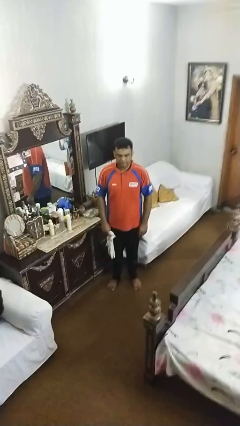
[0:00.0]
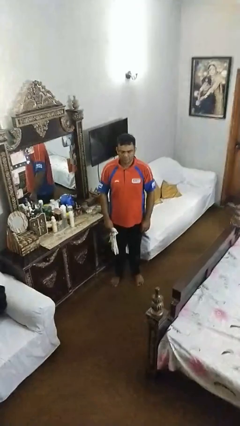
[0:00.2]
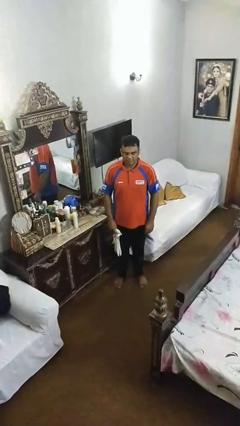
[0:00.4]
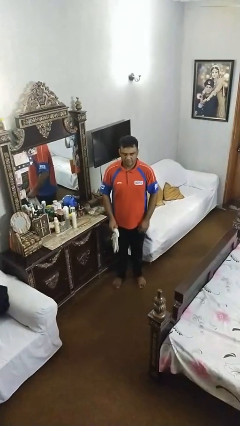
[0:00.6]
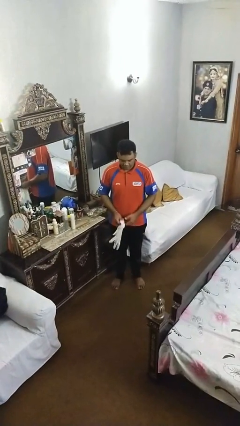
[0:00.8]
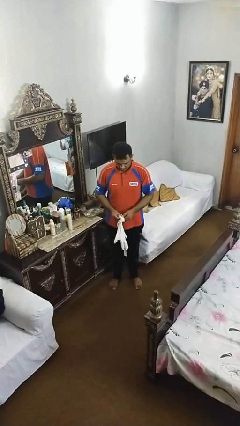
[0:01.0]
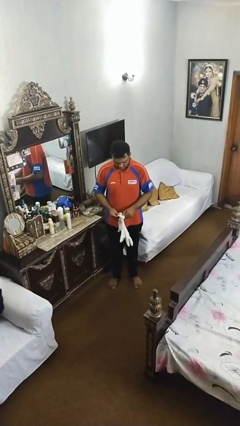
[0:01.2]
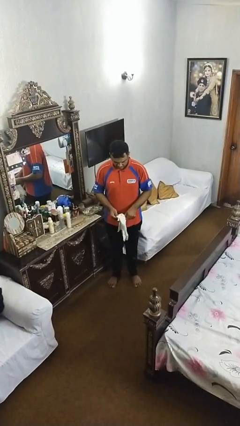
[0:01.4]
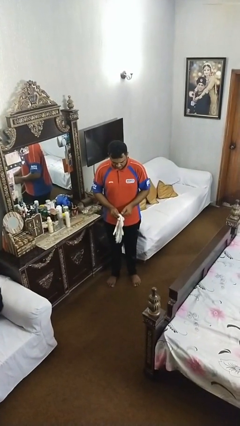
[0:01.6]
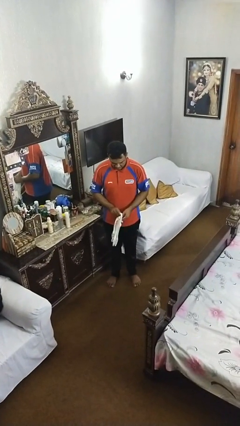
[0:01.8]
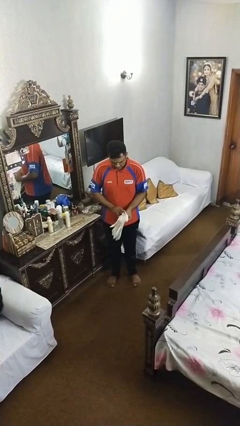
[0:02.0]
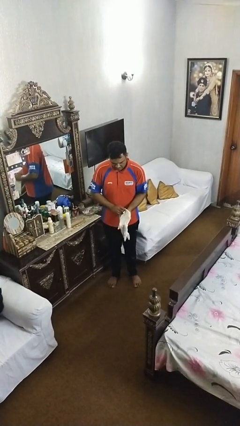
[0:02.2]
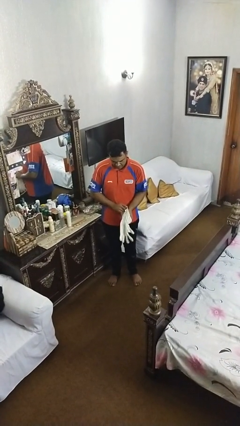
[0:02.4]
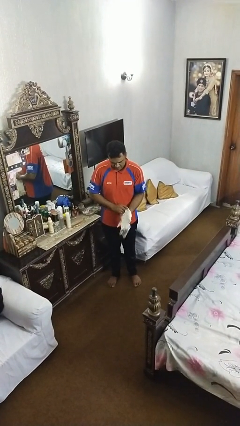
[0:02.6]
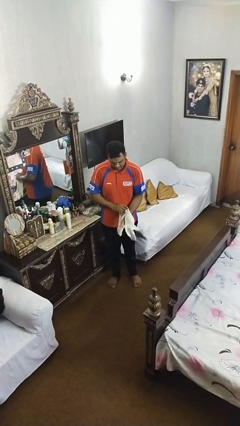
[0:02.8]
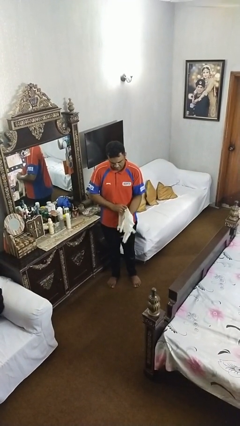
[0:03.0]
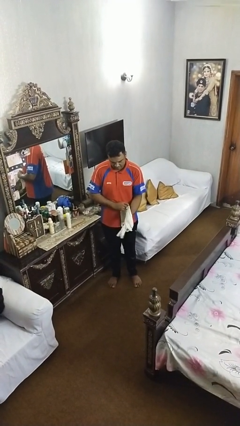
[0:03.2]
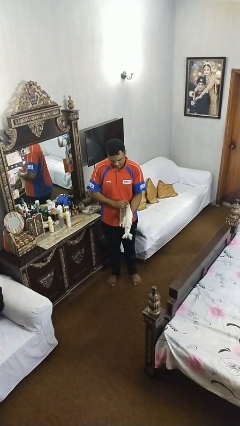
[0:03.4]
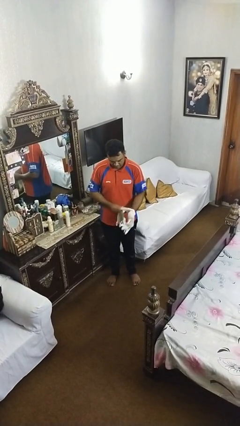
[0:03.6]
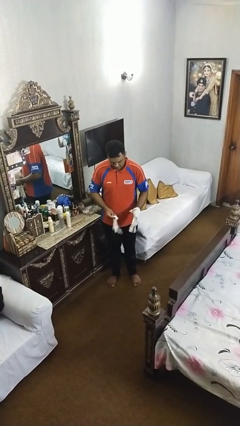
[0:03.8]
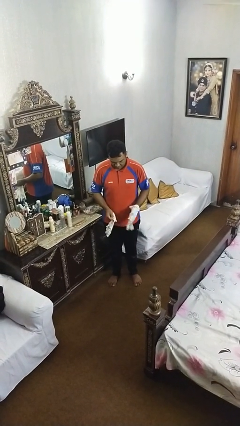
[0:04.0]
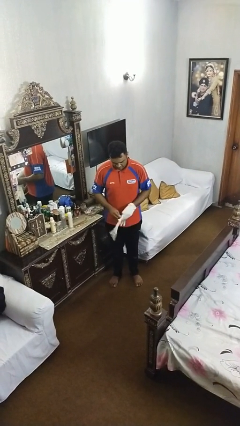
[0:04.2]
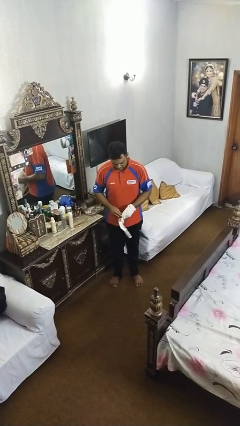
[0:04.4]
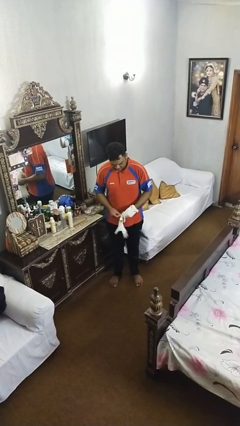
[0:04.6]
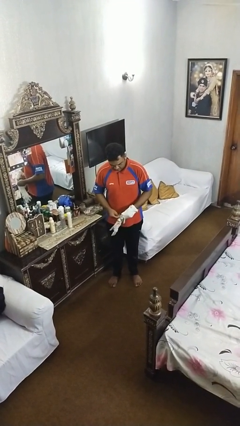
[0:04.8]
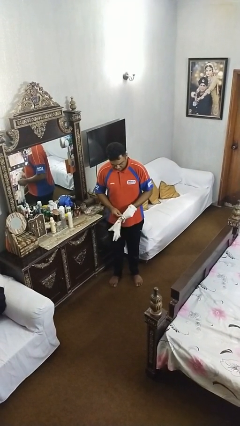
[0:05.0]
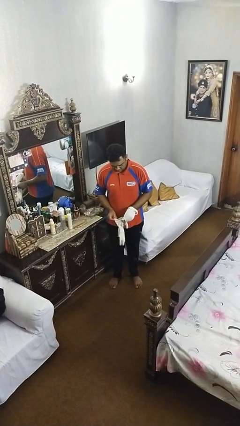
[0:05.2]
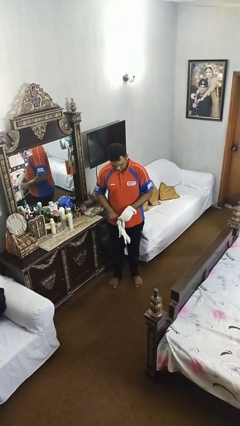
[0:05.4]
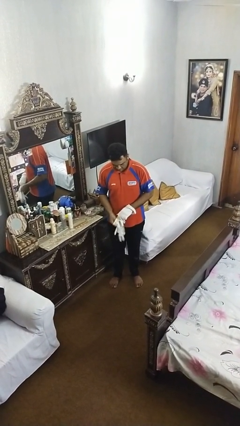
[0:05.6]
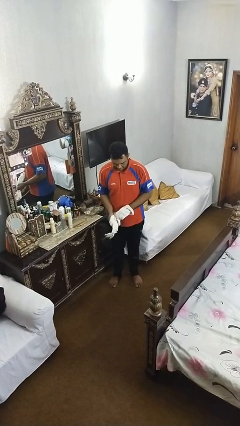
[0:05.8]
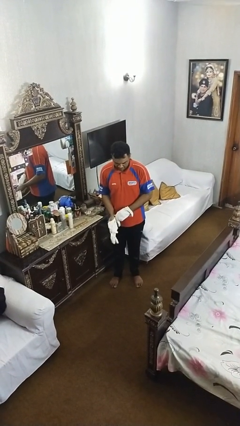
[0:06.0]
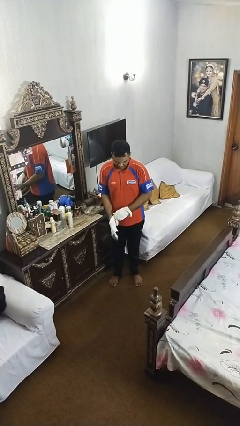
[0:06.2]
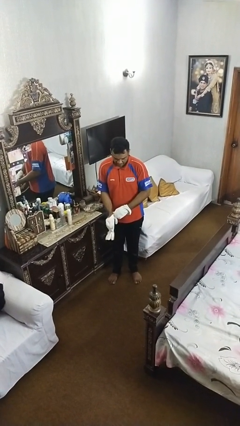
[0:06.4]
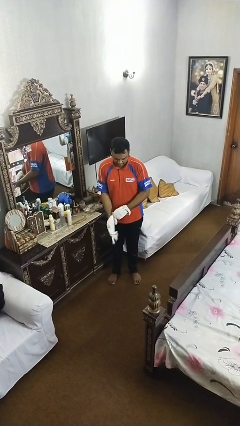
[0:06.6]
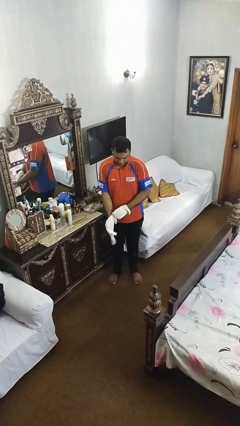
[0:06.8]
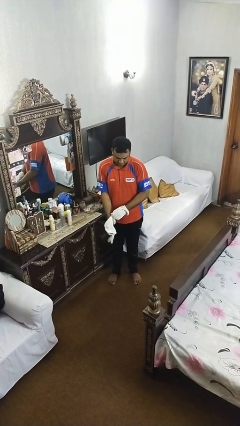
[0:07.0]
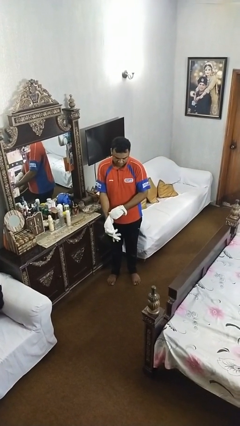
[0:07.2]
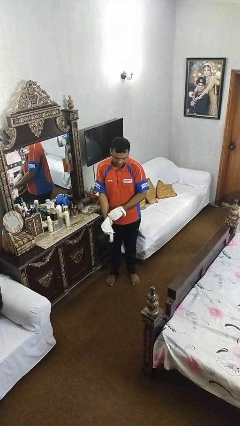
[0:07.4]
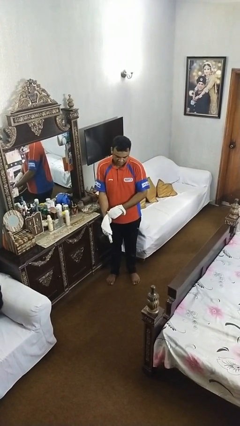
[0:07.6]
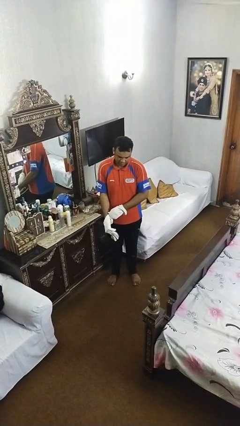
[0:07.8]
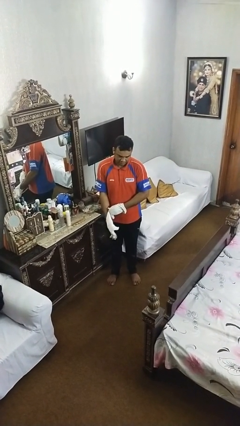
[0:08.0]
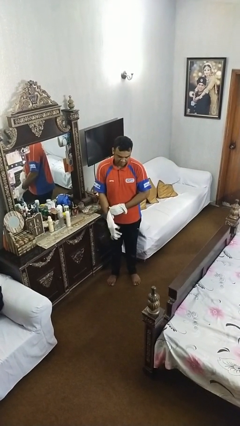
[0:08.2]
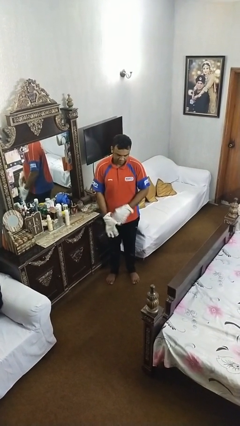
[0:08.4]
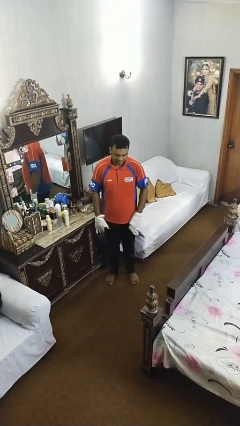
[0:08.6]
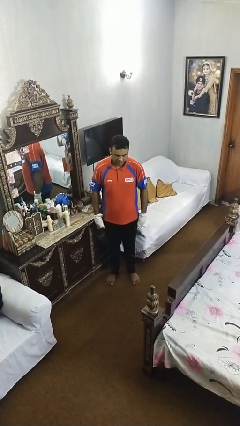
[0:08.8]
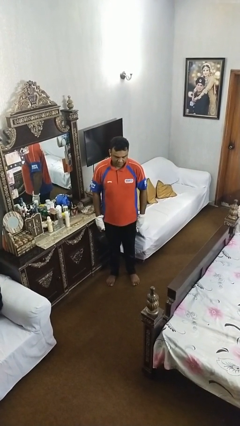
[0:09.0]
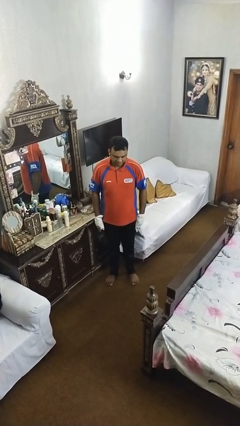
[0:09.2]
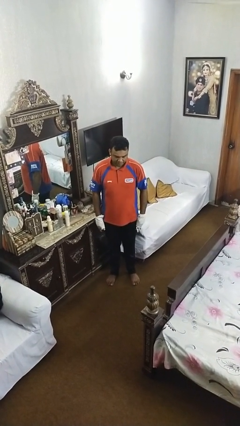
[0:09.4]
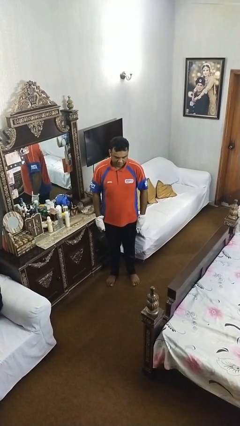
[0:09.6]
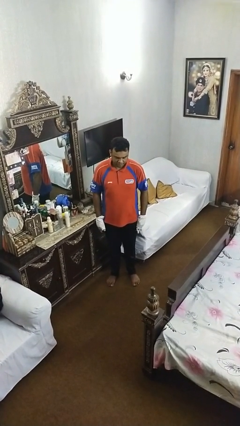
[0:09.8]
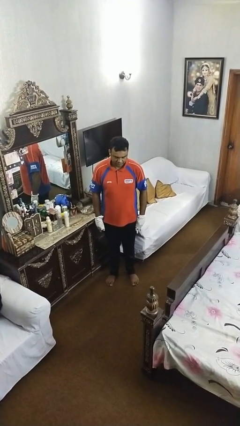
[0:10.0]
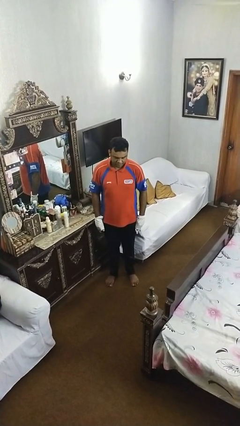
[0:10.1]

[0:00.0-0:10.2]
person puts on gloves

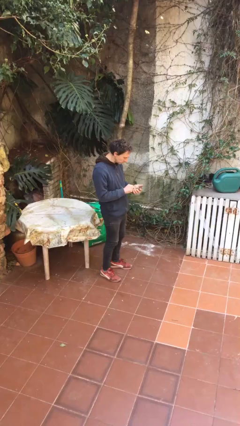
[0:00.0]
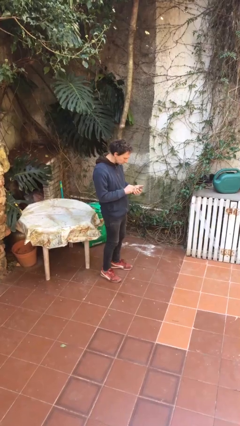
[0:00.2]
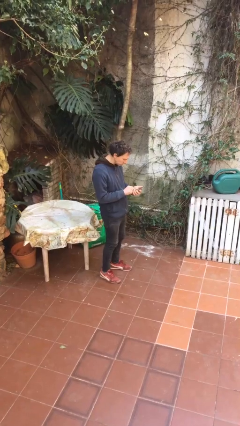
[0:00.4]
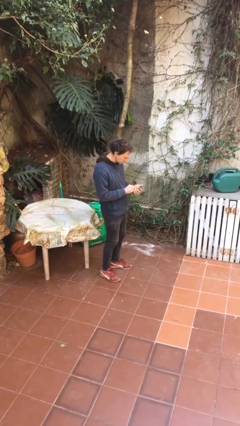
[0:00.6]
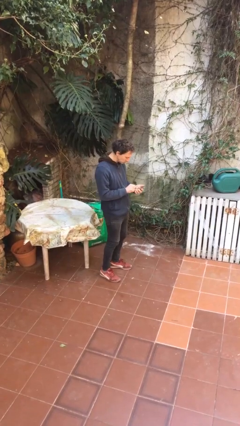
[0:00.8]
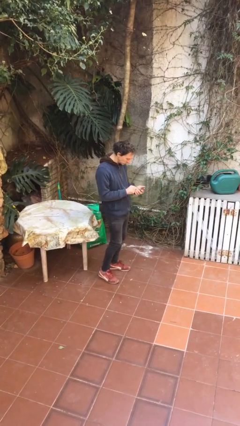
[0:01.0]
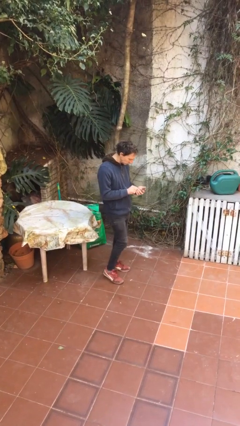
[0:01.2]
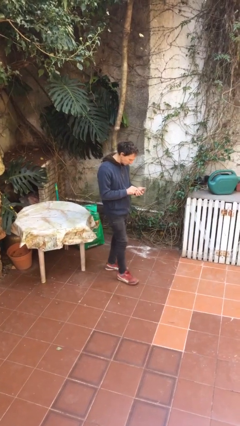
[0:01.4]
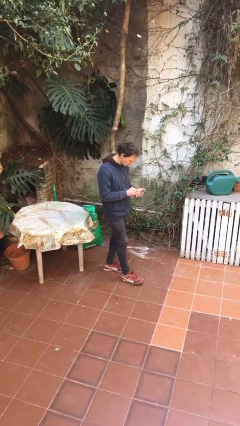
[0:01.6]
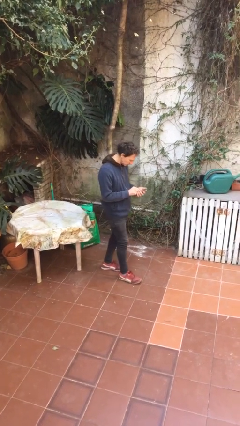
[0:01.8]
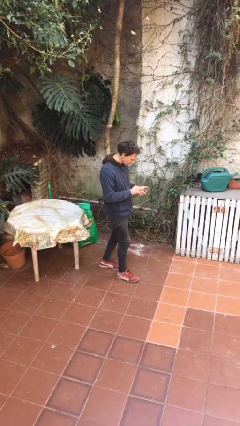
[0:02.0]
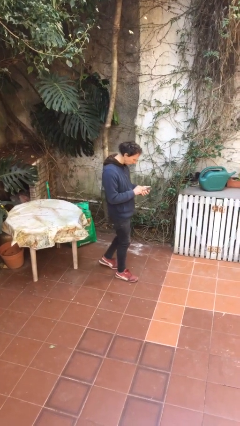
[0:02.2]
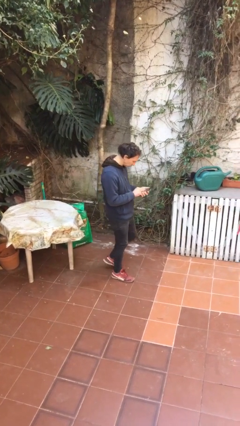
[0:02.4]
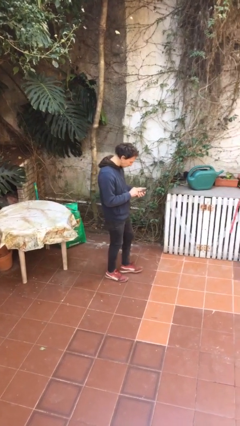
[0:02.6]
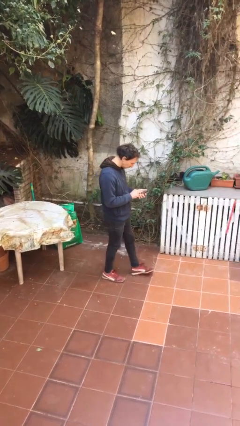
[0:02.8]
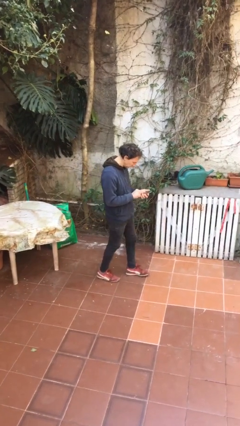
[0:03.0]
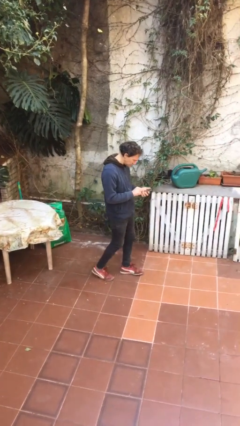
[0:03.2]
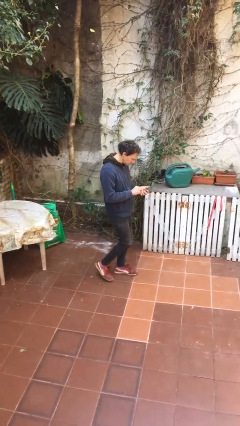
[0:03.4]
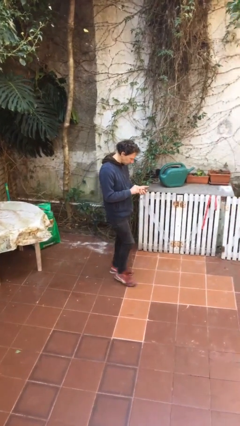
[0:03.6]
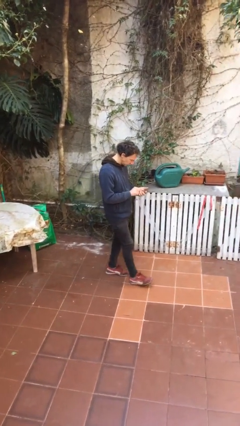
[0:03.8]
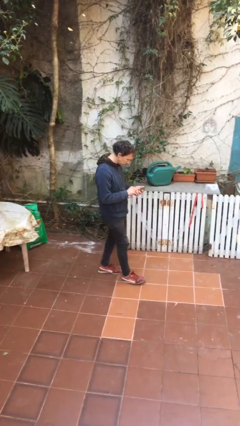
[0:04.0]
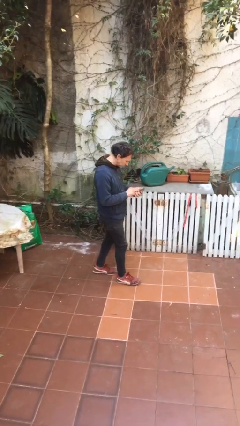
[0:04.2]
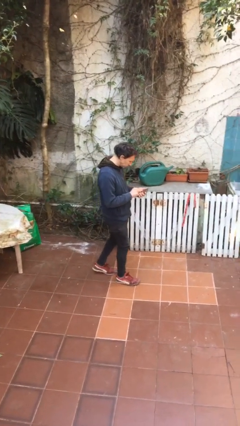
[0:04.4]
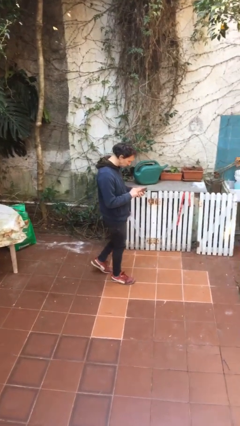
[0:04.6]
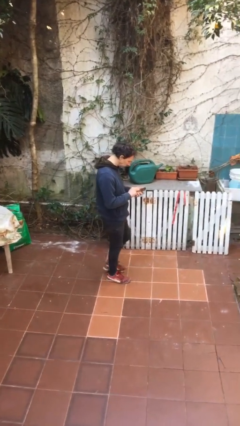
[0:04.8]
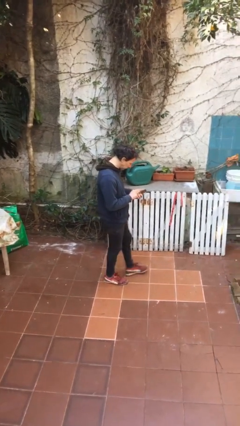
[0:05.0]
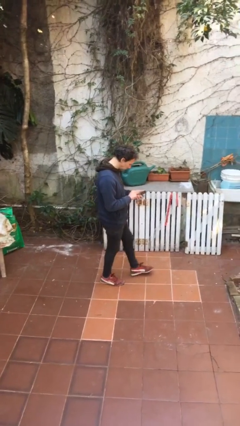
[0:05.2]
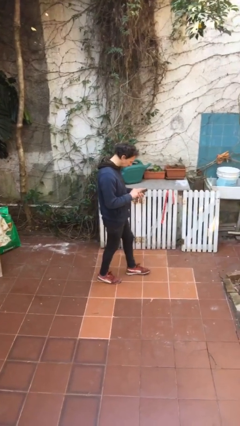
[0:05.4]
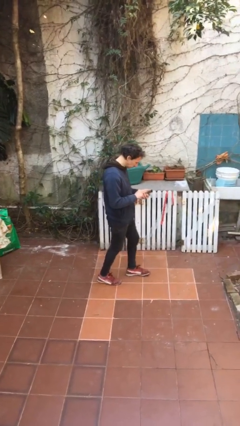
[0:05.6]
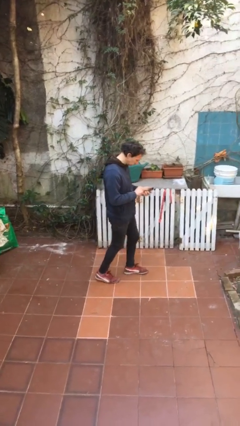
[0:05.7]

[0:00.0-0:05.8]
person texts on phone

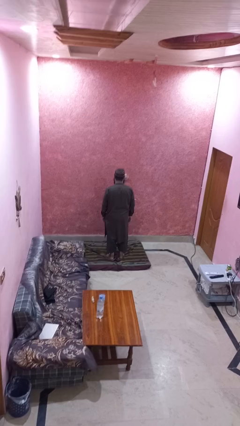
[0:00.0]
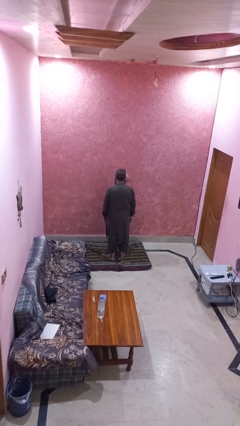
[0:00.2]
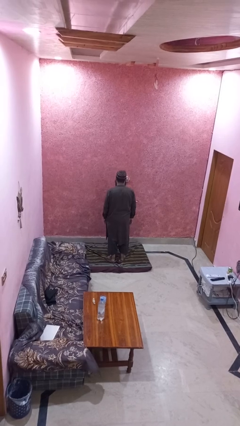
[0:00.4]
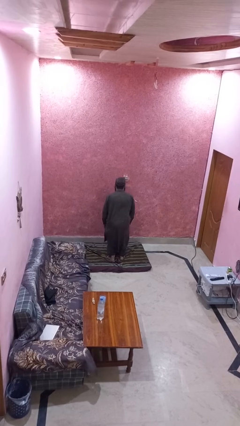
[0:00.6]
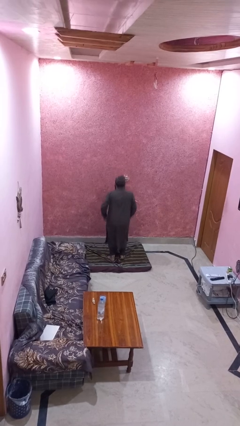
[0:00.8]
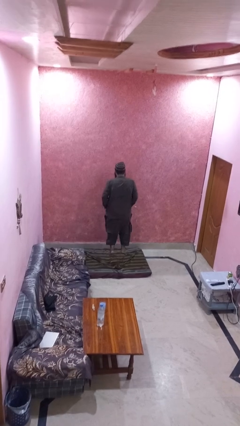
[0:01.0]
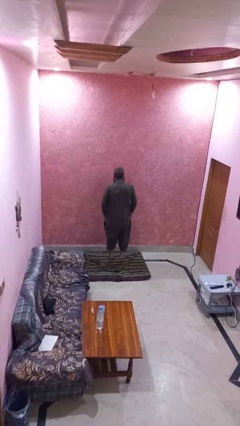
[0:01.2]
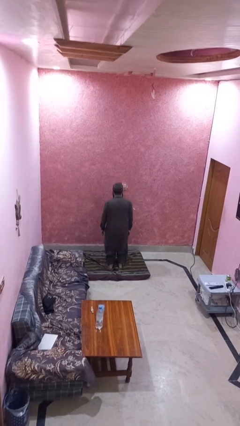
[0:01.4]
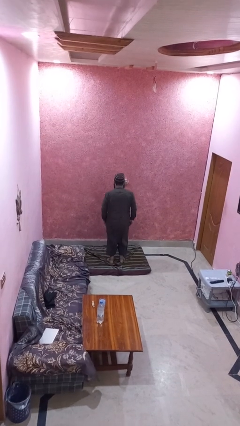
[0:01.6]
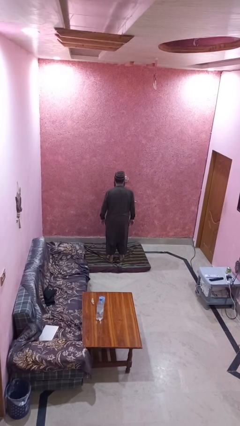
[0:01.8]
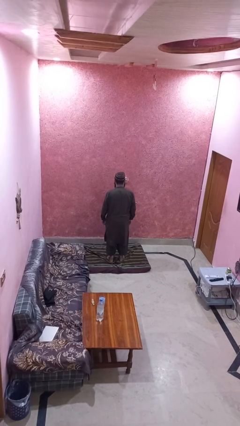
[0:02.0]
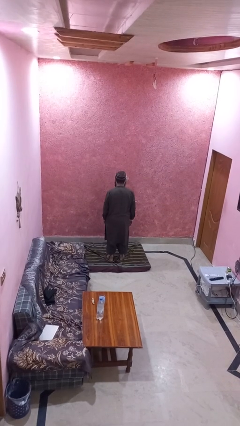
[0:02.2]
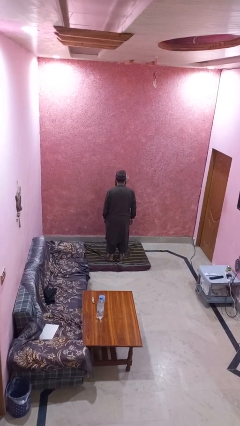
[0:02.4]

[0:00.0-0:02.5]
person jumps
